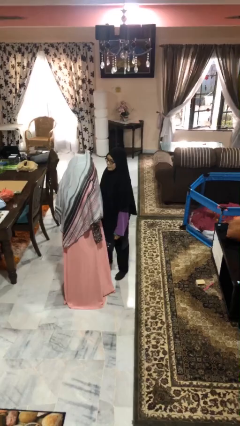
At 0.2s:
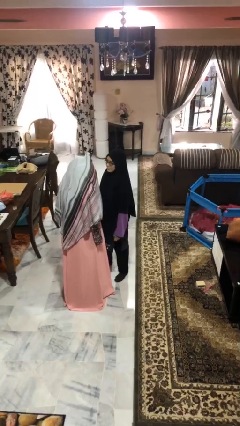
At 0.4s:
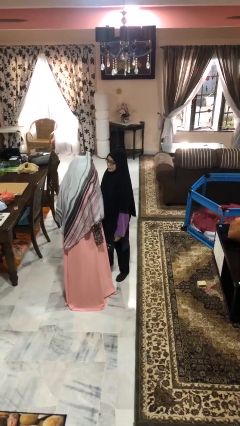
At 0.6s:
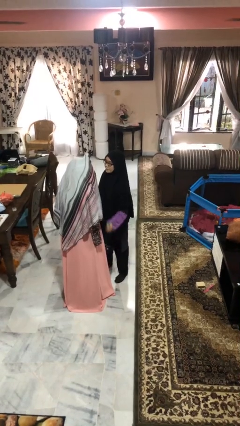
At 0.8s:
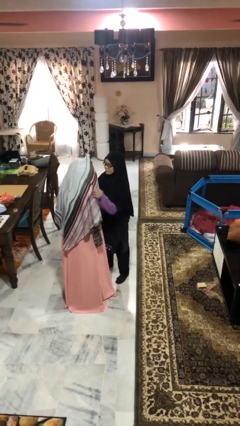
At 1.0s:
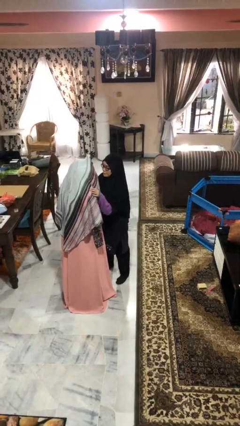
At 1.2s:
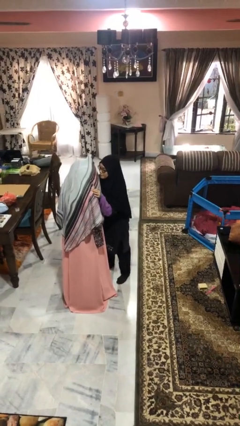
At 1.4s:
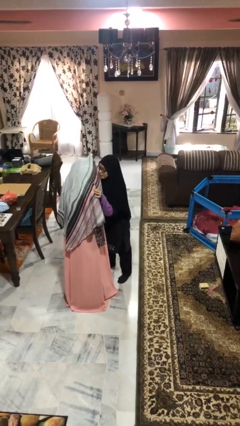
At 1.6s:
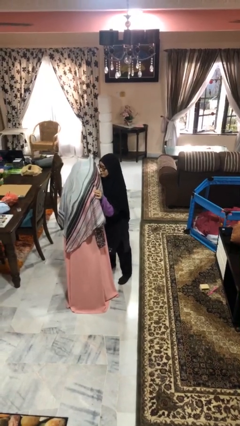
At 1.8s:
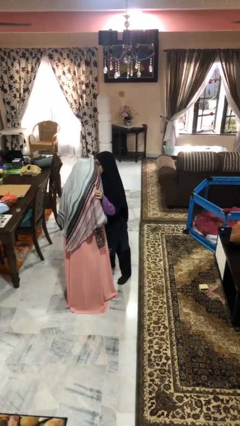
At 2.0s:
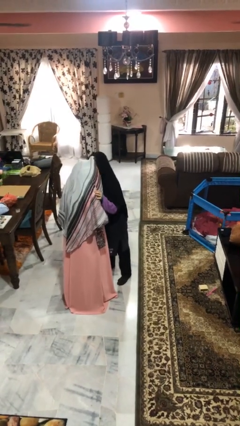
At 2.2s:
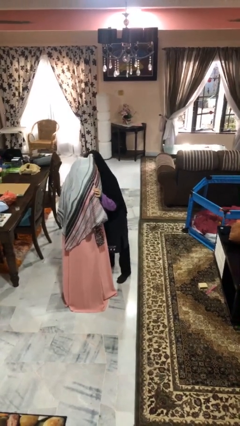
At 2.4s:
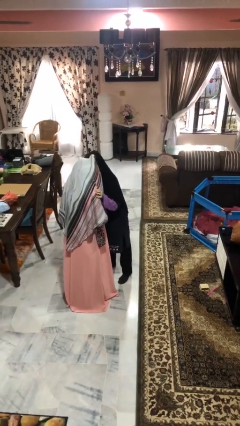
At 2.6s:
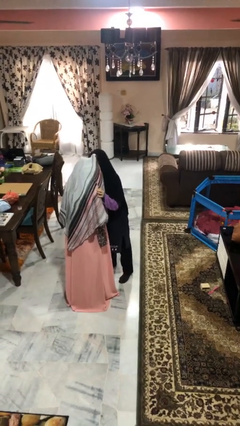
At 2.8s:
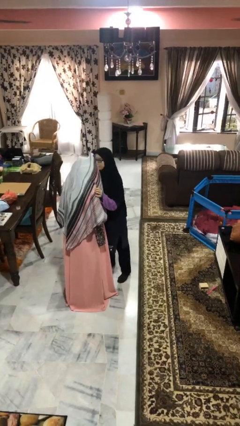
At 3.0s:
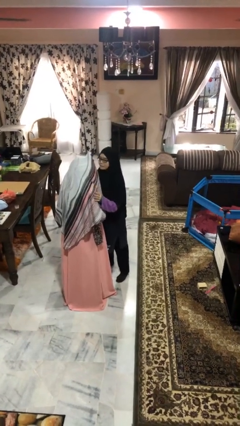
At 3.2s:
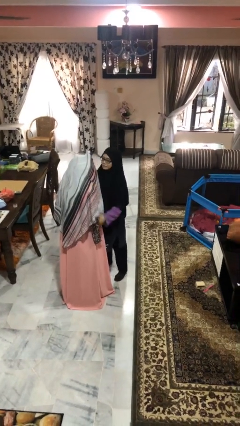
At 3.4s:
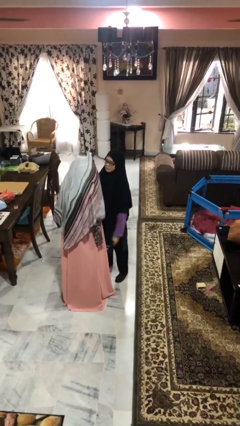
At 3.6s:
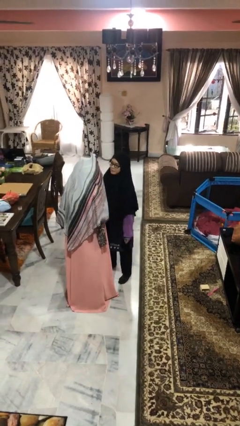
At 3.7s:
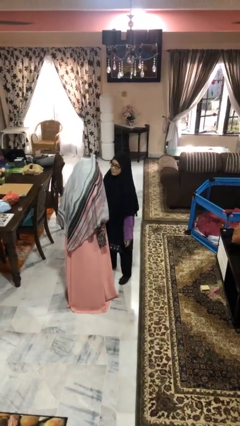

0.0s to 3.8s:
person kisses cheek of person

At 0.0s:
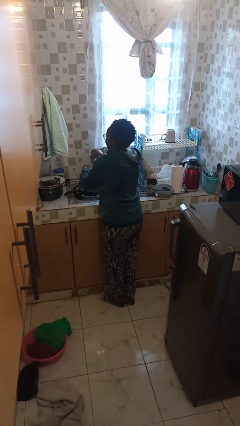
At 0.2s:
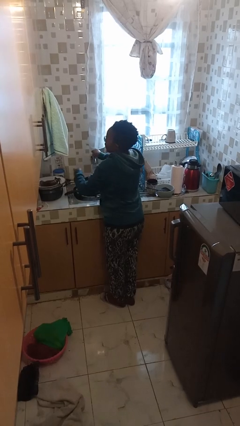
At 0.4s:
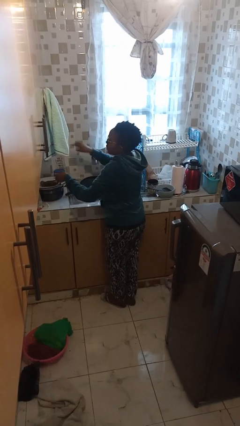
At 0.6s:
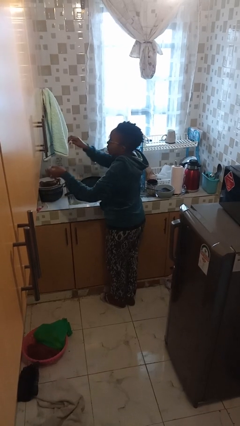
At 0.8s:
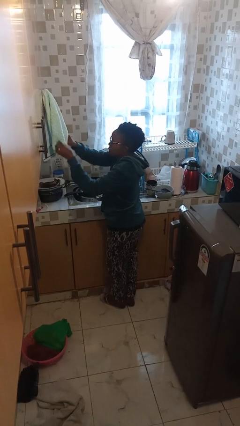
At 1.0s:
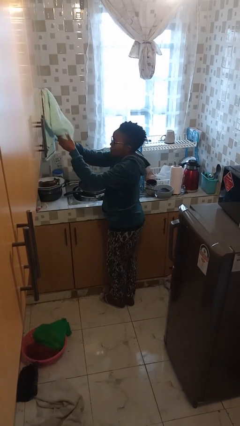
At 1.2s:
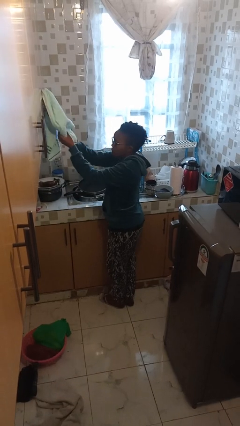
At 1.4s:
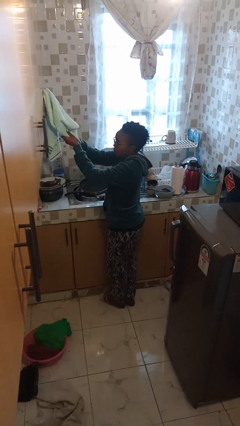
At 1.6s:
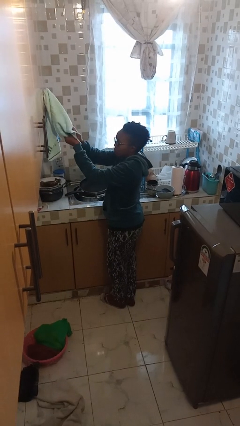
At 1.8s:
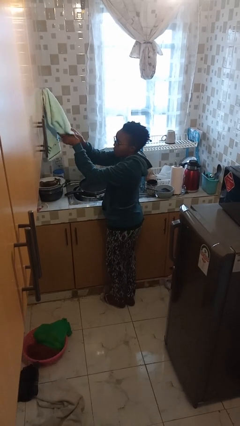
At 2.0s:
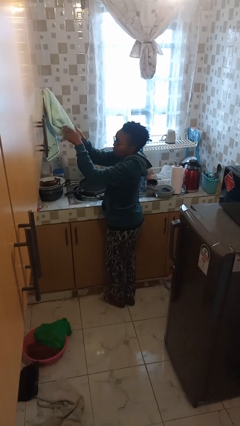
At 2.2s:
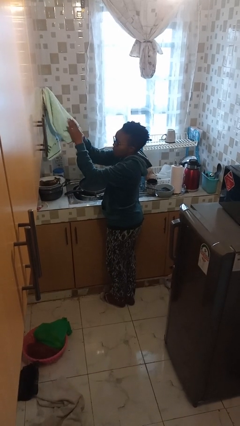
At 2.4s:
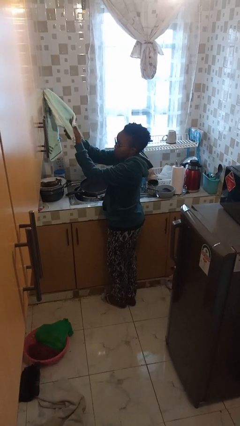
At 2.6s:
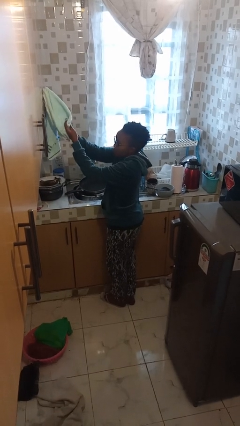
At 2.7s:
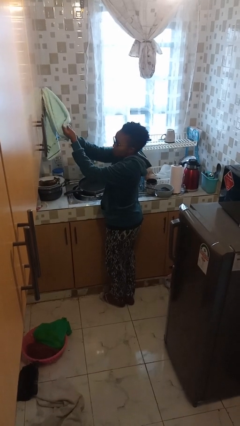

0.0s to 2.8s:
person dries hands with towel

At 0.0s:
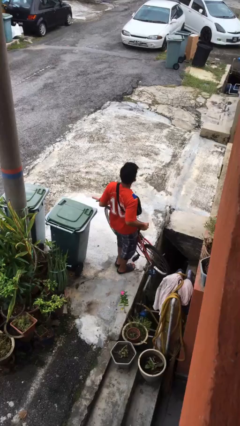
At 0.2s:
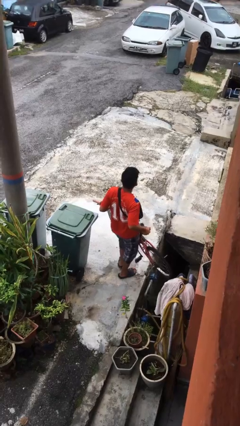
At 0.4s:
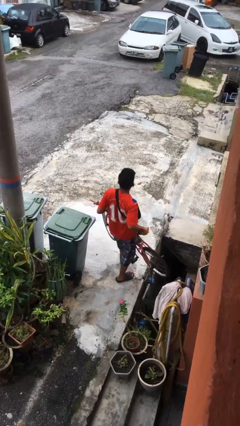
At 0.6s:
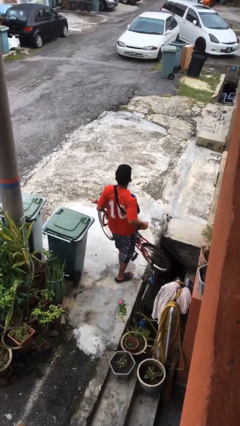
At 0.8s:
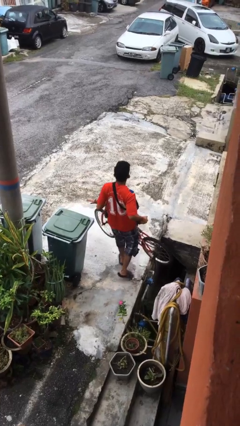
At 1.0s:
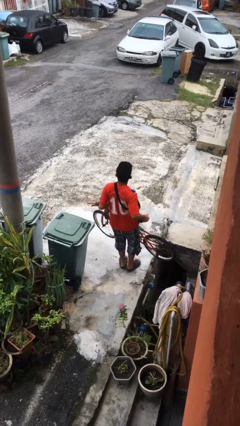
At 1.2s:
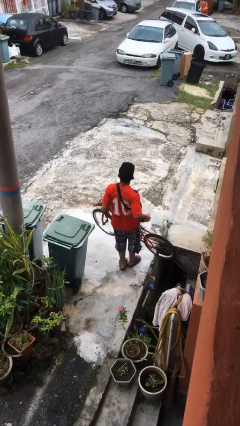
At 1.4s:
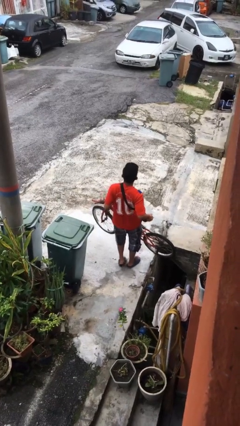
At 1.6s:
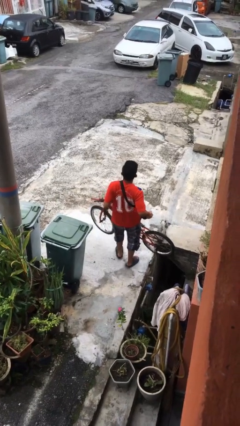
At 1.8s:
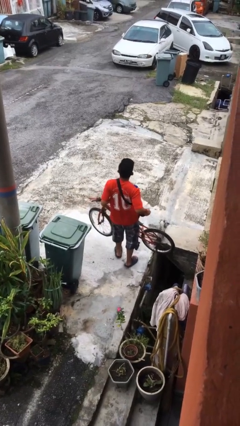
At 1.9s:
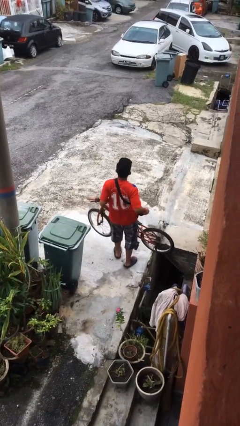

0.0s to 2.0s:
person carries bicycle

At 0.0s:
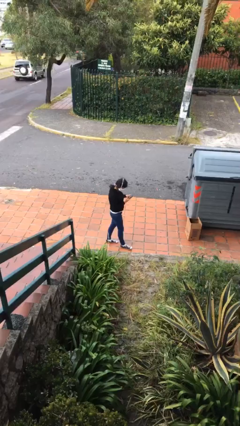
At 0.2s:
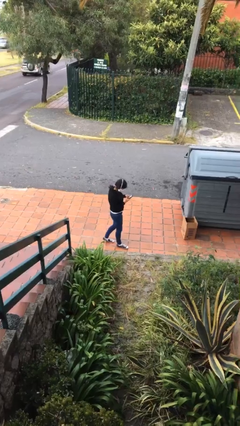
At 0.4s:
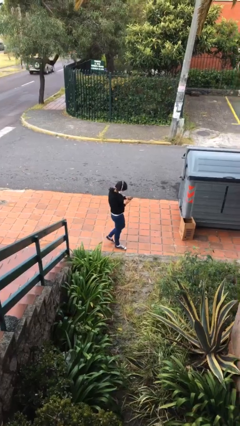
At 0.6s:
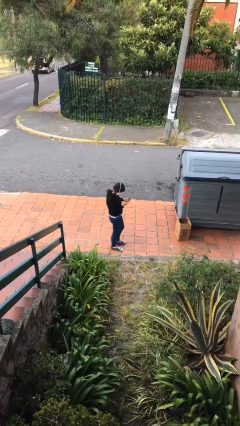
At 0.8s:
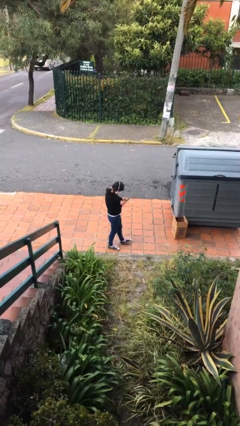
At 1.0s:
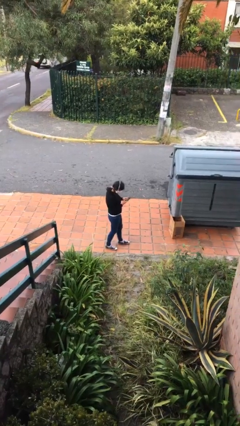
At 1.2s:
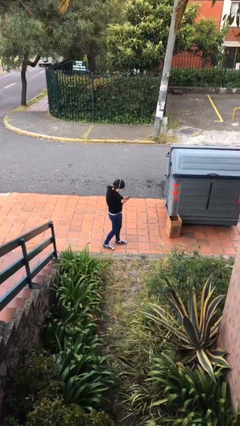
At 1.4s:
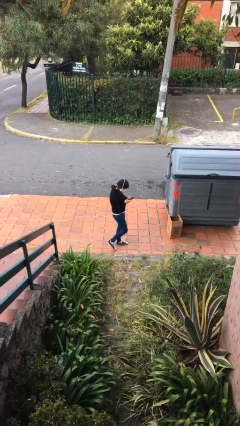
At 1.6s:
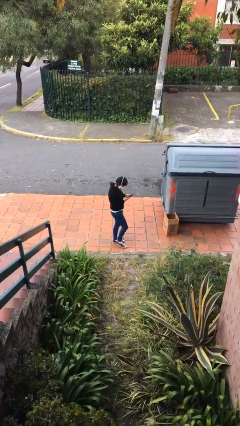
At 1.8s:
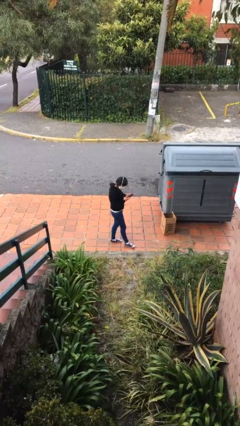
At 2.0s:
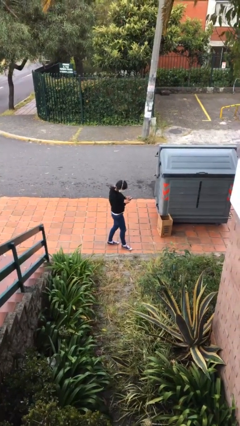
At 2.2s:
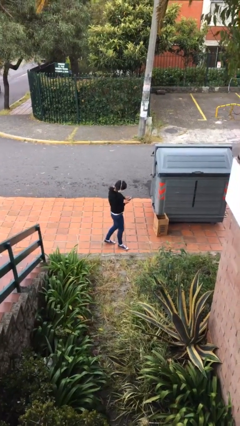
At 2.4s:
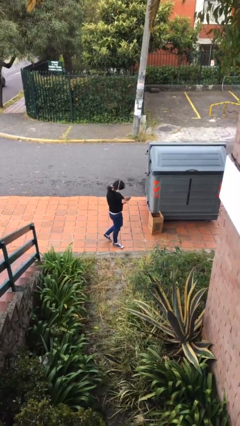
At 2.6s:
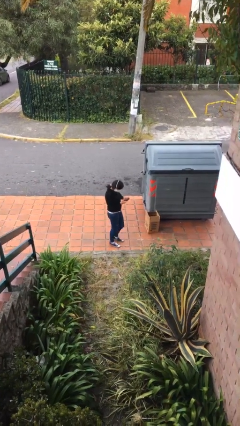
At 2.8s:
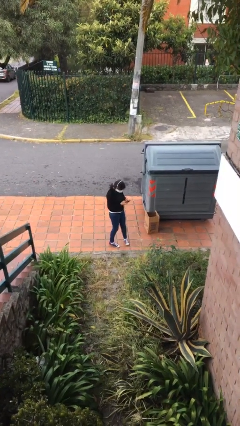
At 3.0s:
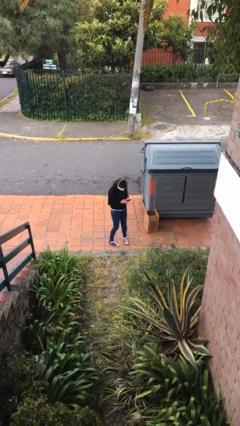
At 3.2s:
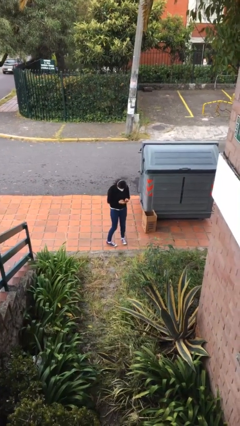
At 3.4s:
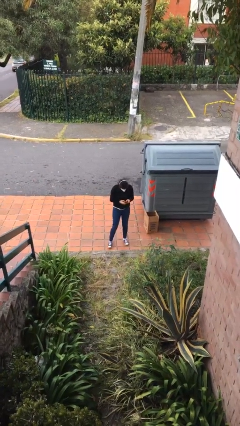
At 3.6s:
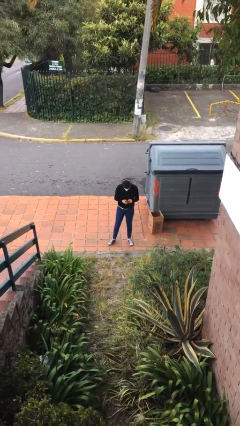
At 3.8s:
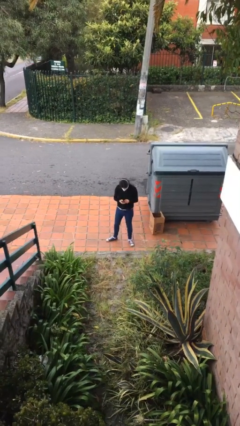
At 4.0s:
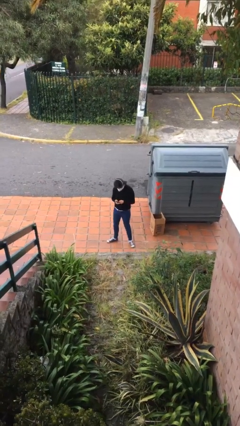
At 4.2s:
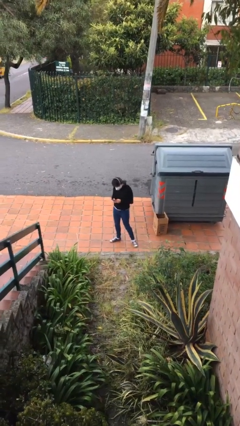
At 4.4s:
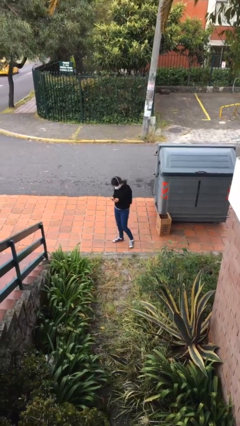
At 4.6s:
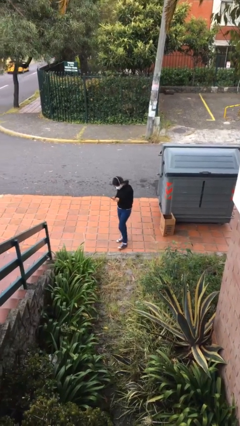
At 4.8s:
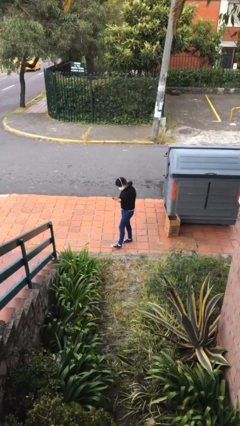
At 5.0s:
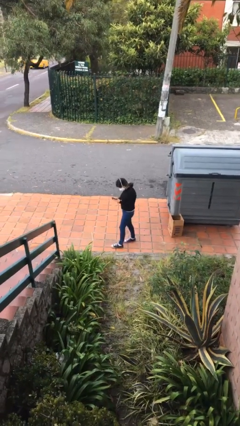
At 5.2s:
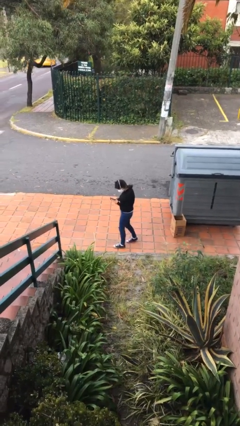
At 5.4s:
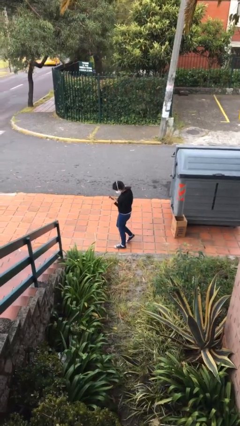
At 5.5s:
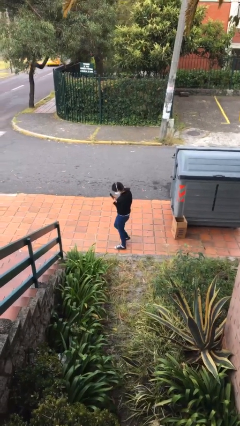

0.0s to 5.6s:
person texts on phone

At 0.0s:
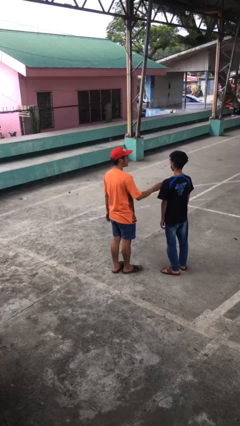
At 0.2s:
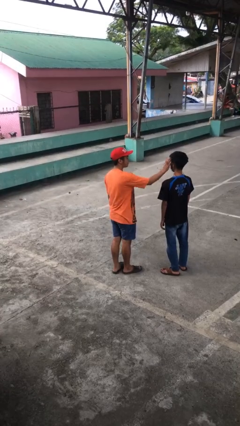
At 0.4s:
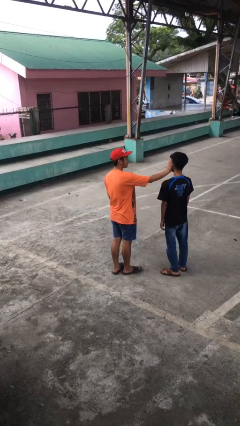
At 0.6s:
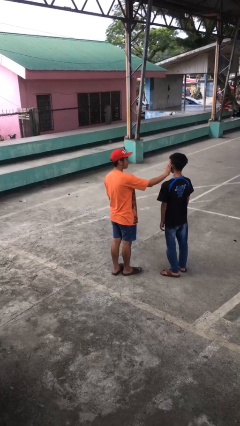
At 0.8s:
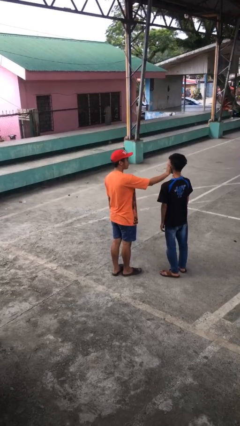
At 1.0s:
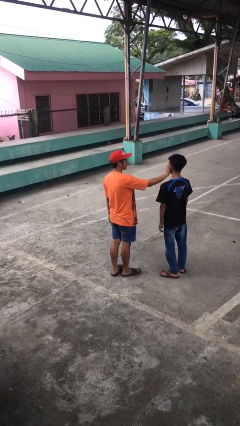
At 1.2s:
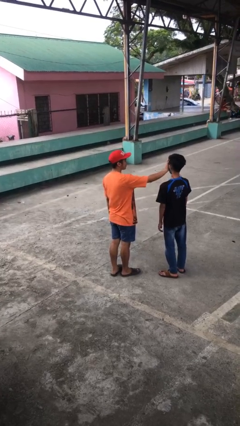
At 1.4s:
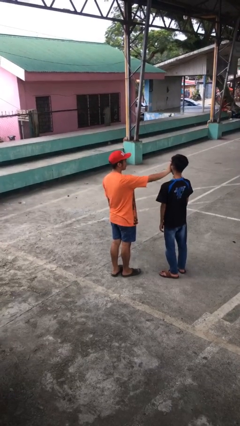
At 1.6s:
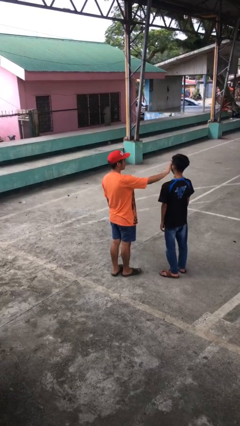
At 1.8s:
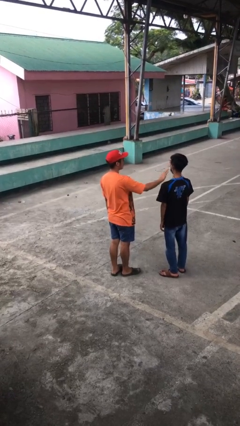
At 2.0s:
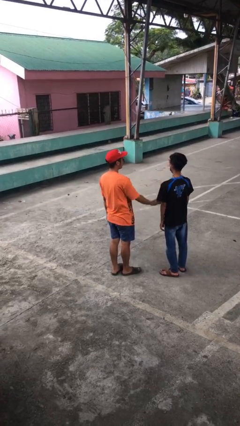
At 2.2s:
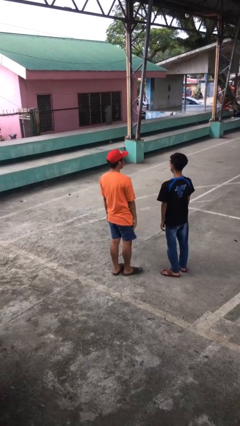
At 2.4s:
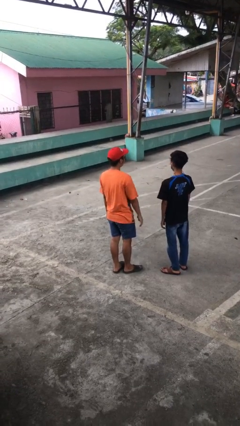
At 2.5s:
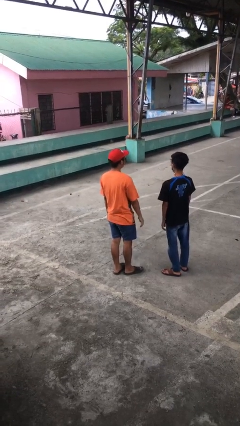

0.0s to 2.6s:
person touches face of person

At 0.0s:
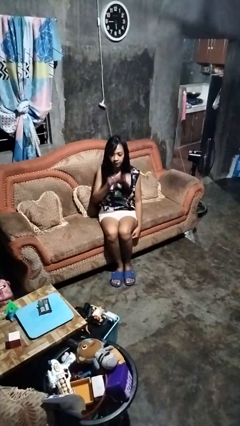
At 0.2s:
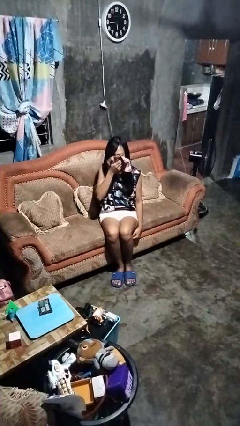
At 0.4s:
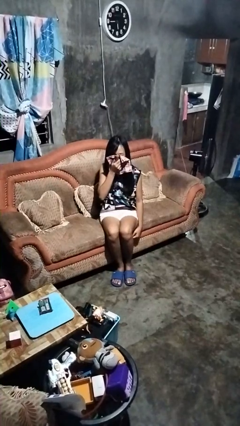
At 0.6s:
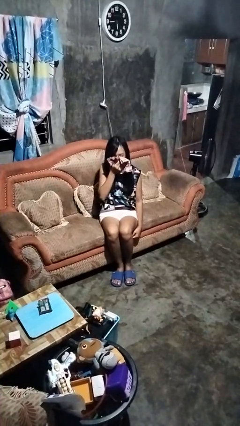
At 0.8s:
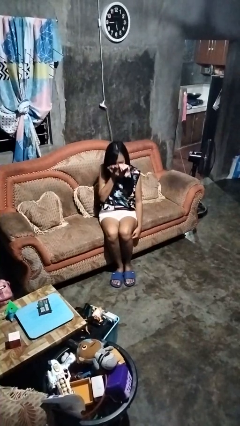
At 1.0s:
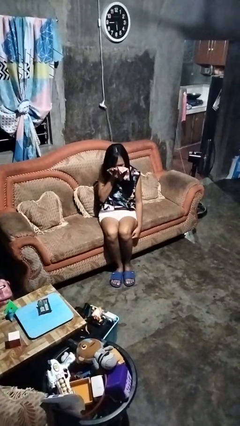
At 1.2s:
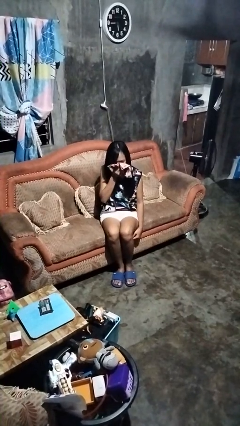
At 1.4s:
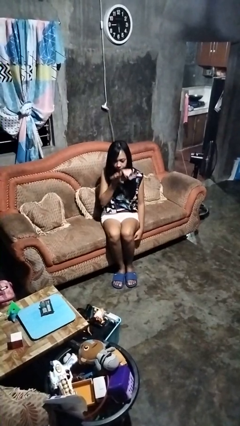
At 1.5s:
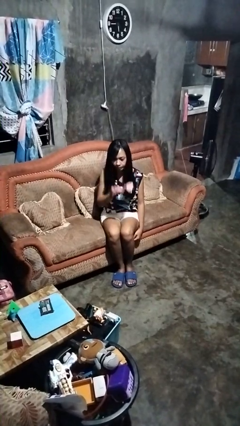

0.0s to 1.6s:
person blows nose
